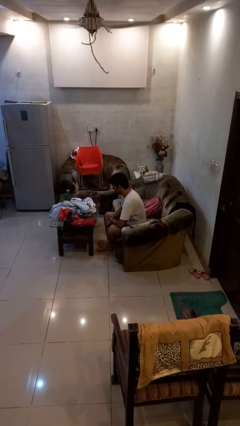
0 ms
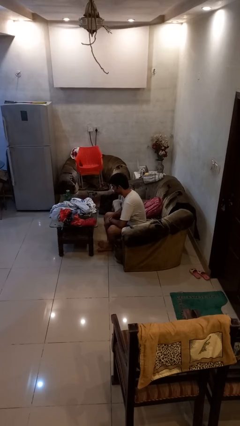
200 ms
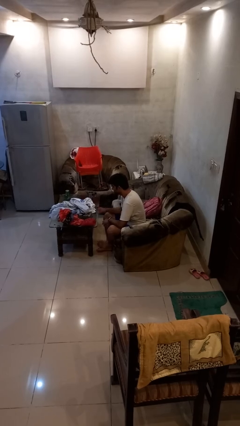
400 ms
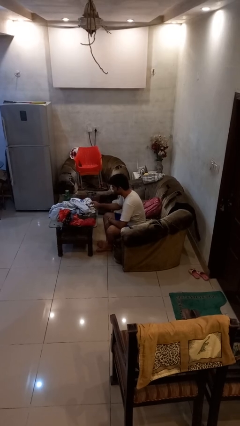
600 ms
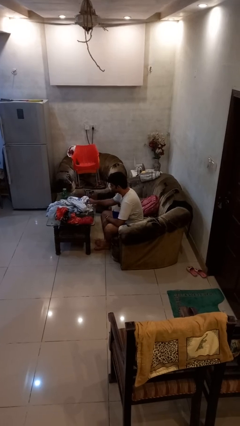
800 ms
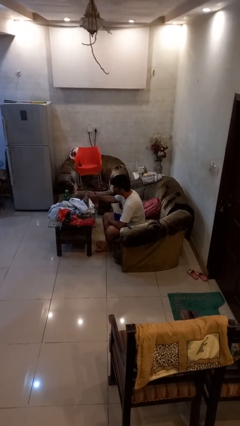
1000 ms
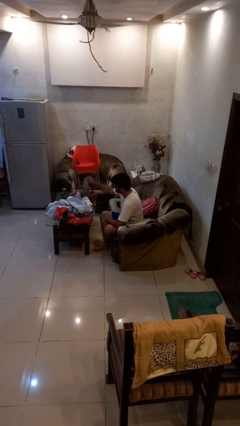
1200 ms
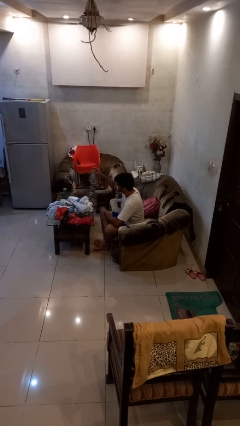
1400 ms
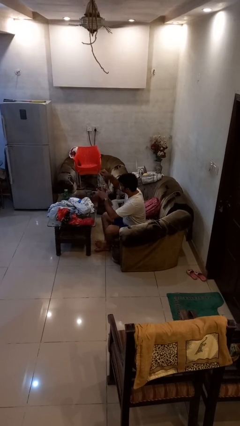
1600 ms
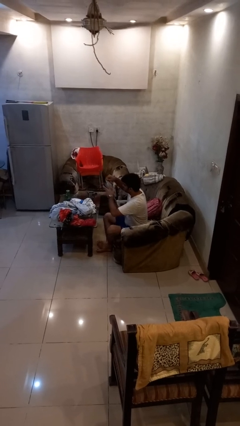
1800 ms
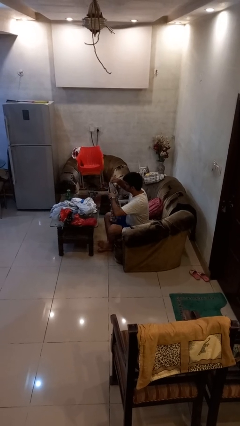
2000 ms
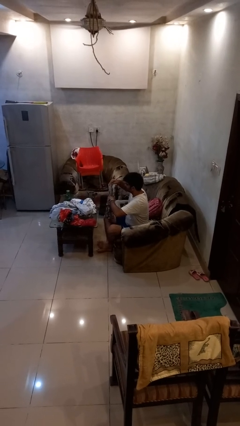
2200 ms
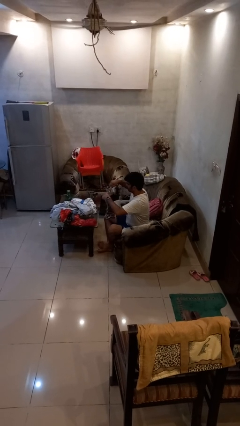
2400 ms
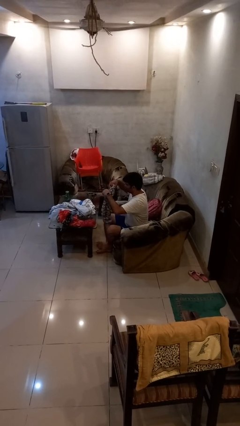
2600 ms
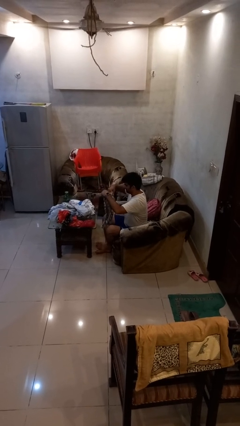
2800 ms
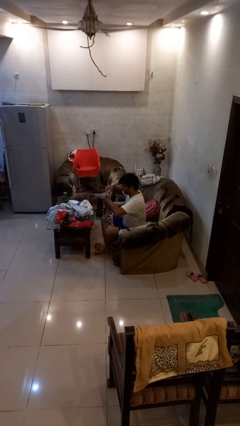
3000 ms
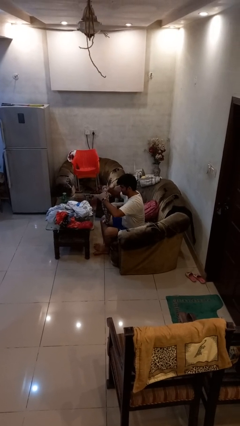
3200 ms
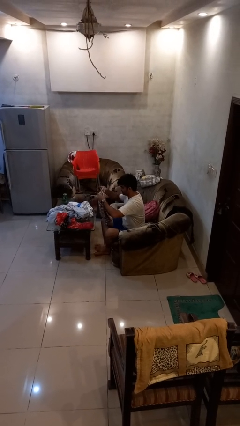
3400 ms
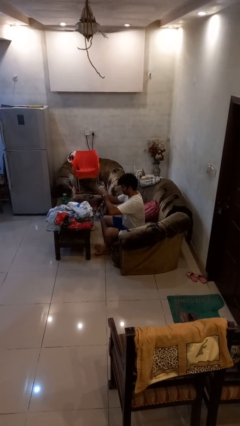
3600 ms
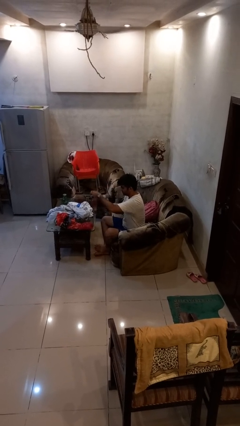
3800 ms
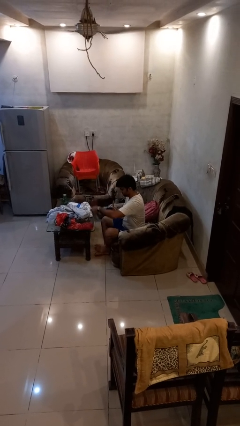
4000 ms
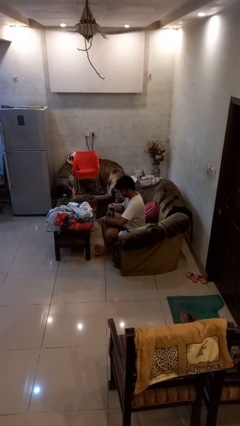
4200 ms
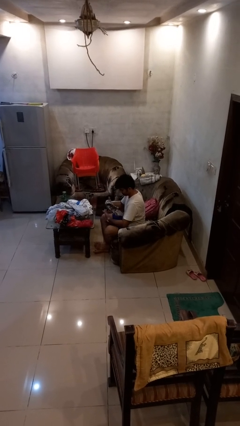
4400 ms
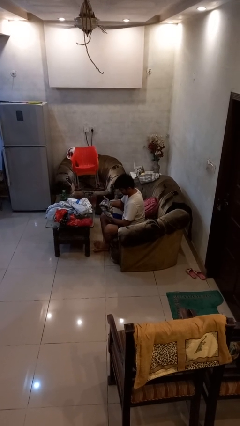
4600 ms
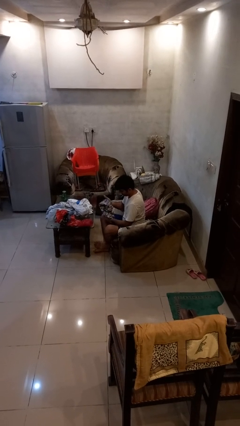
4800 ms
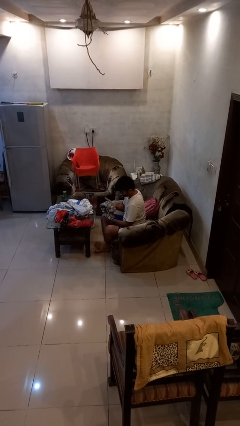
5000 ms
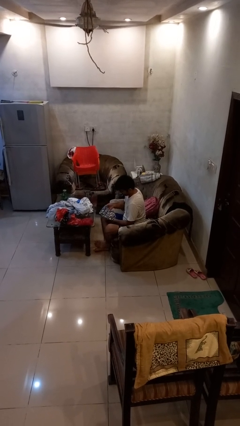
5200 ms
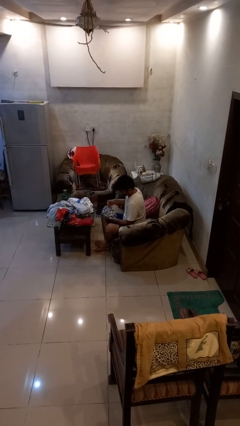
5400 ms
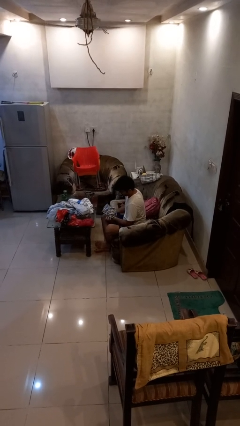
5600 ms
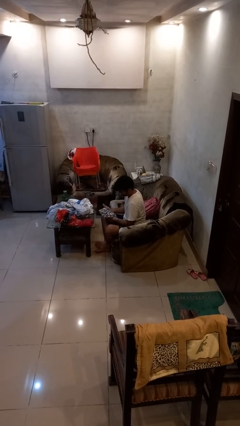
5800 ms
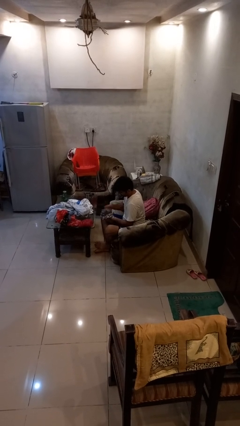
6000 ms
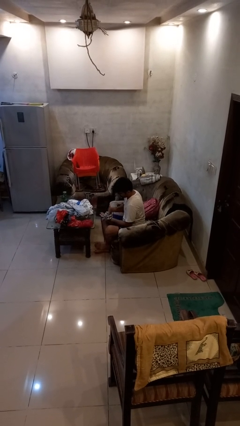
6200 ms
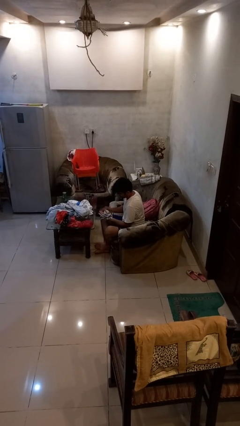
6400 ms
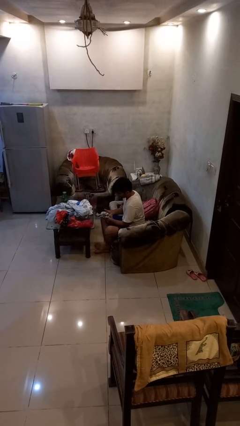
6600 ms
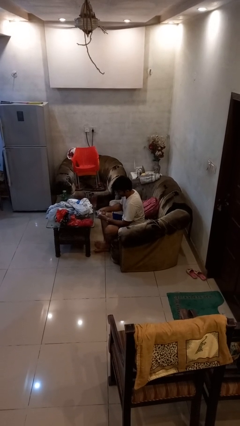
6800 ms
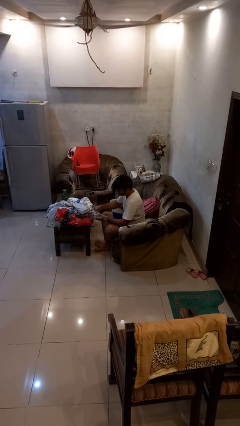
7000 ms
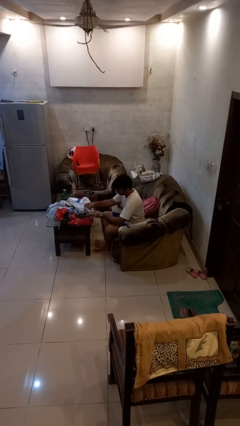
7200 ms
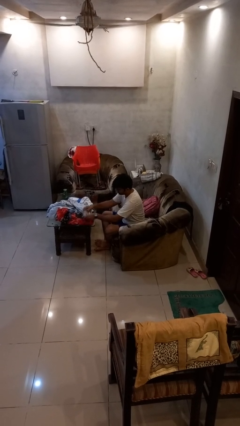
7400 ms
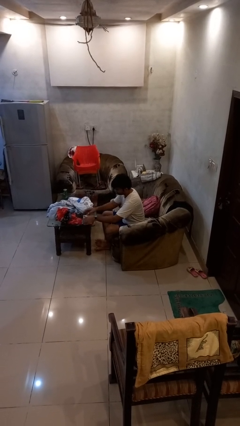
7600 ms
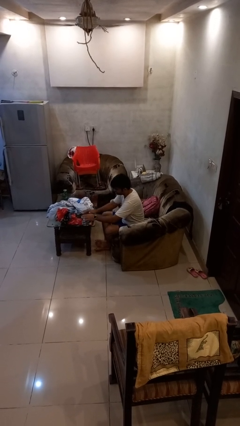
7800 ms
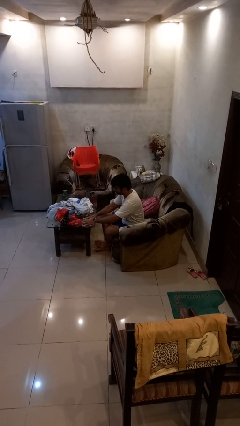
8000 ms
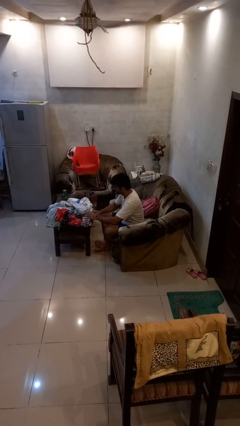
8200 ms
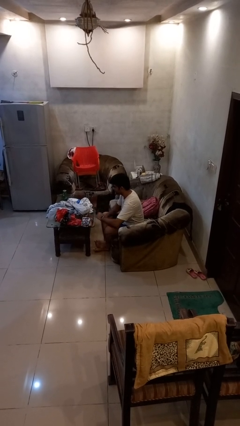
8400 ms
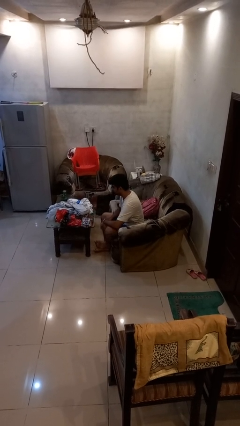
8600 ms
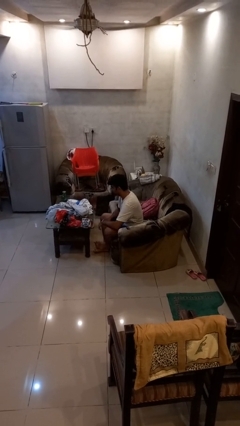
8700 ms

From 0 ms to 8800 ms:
person folds pants

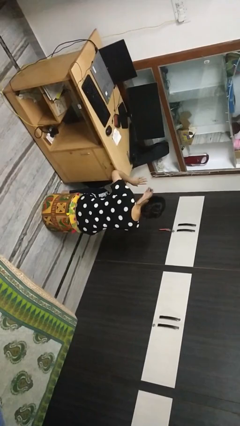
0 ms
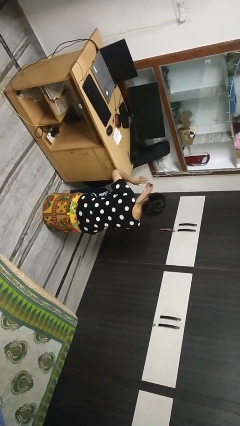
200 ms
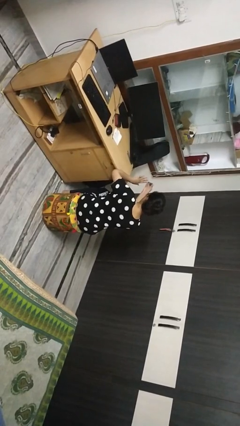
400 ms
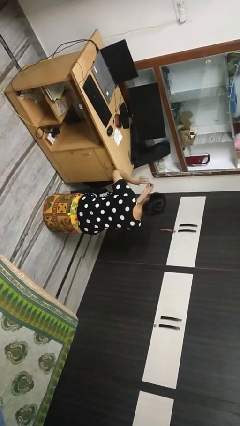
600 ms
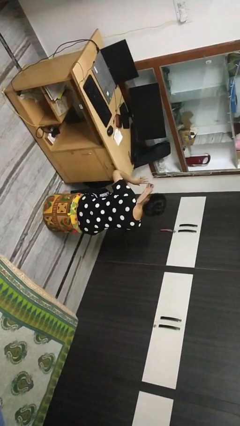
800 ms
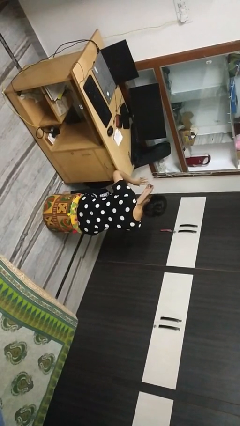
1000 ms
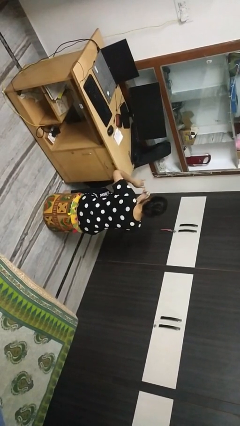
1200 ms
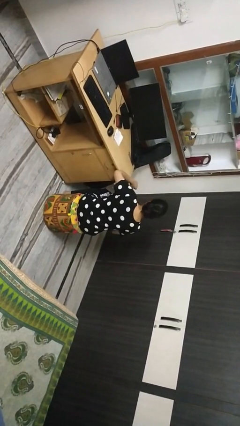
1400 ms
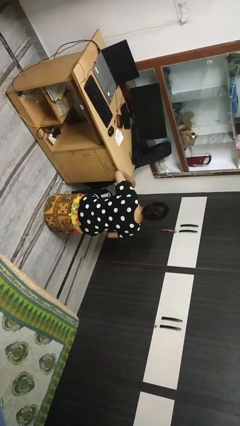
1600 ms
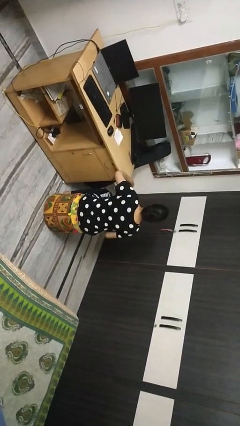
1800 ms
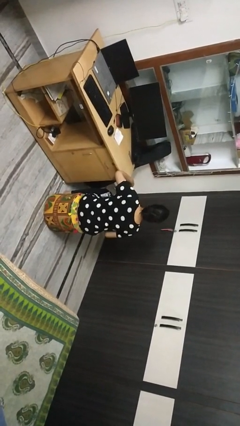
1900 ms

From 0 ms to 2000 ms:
person clips fingernails

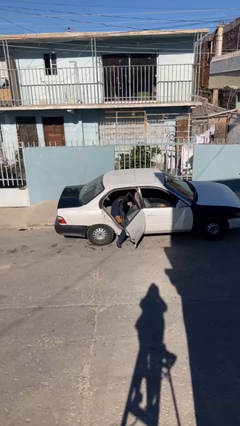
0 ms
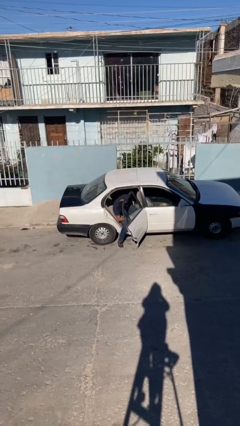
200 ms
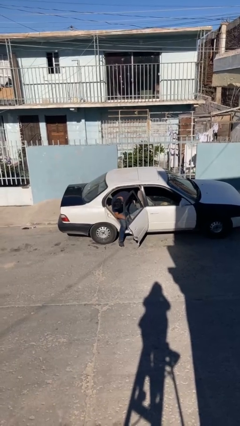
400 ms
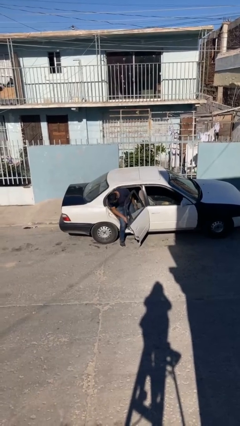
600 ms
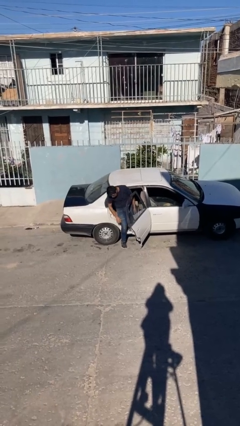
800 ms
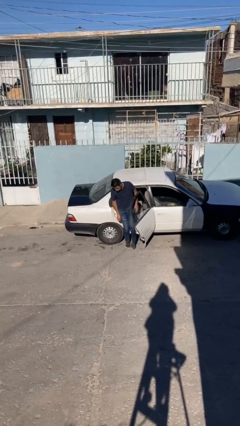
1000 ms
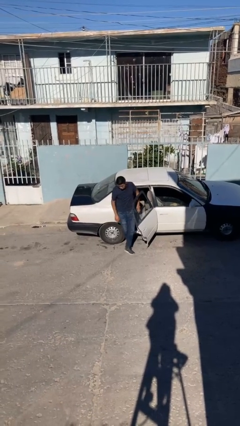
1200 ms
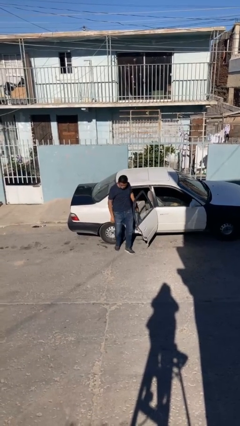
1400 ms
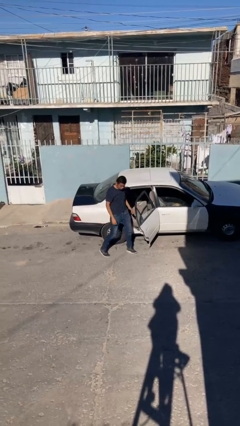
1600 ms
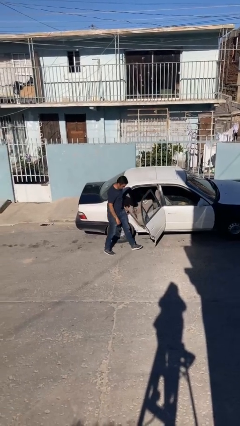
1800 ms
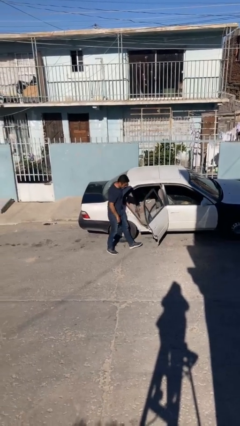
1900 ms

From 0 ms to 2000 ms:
person exits car

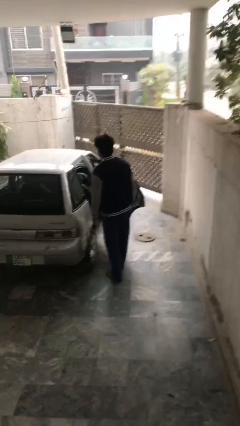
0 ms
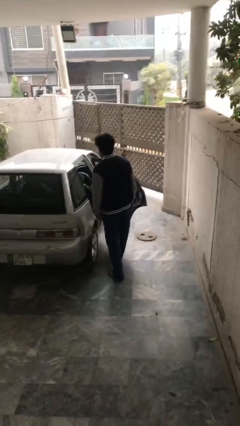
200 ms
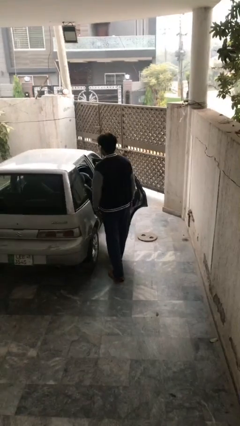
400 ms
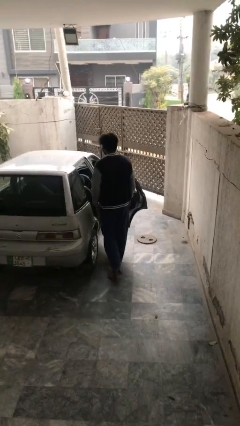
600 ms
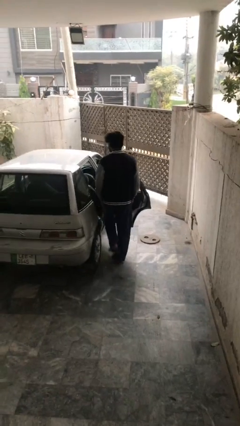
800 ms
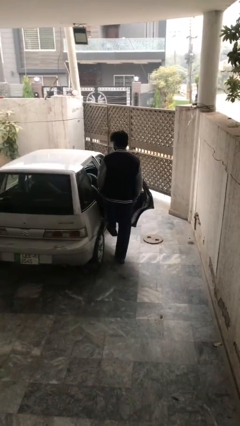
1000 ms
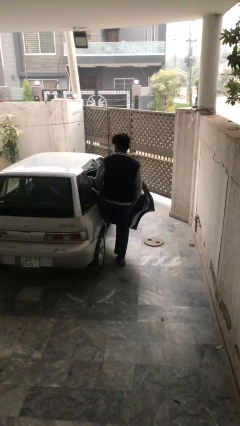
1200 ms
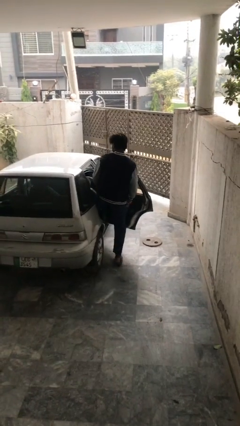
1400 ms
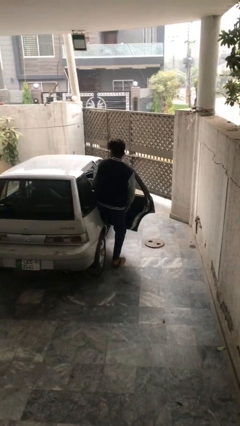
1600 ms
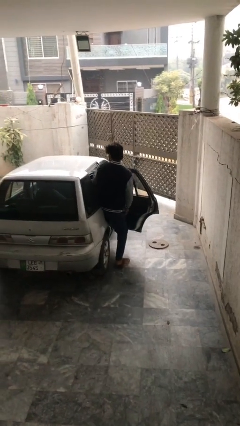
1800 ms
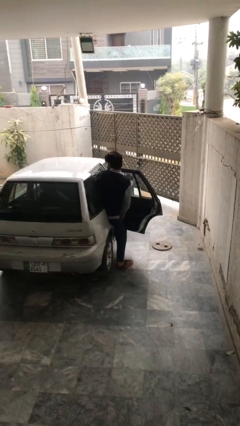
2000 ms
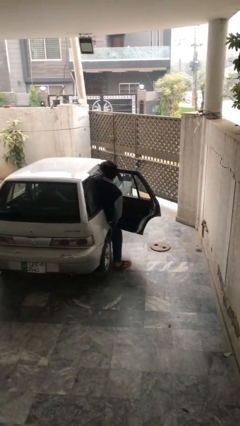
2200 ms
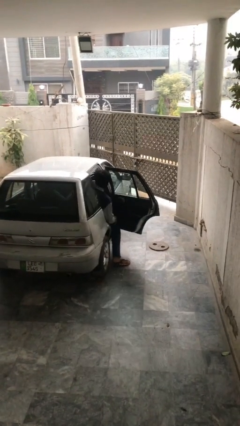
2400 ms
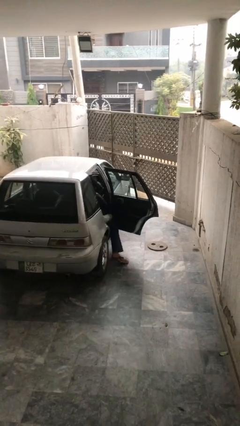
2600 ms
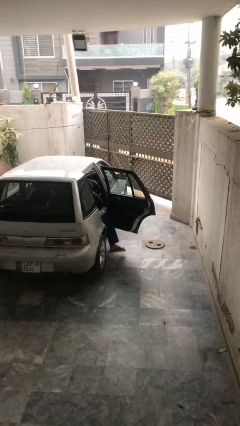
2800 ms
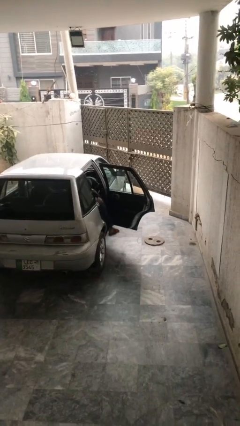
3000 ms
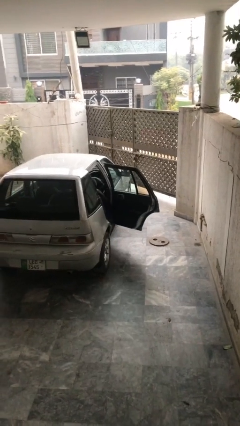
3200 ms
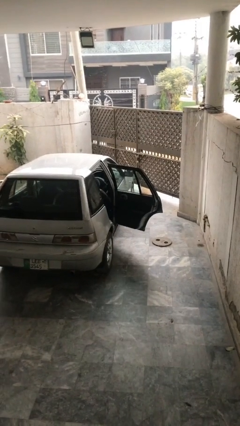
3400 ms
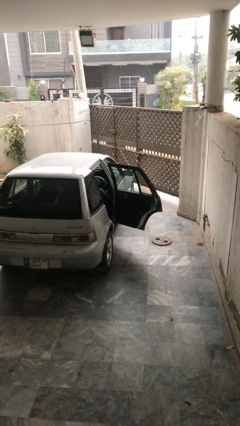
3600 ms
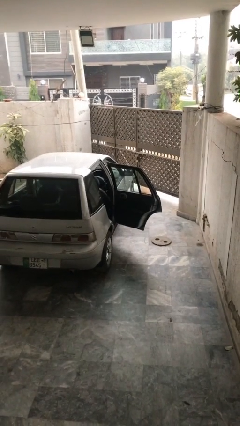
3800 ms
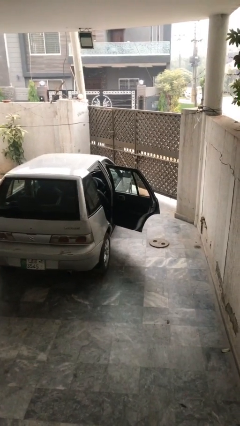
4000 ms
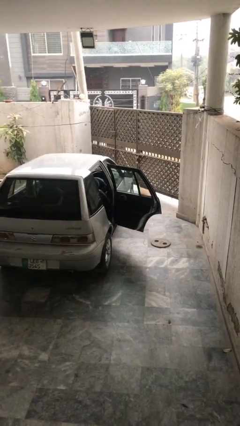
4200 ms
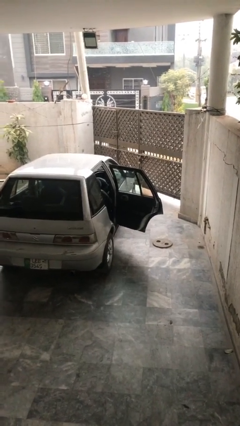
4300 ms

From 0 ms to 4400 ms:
person enters car

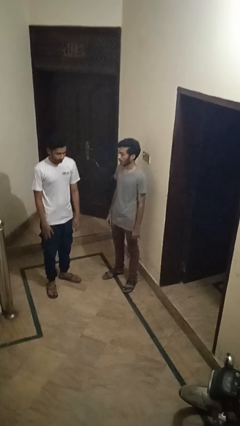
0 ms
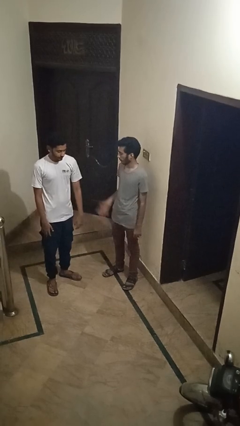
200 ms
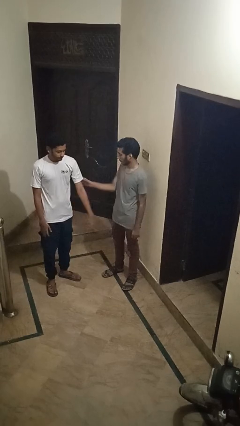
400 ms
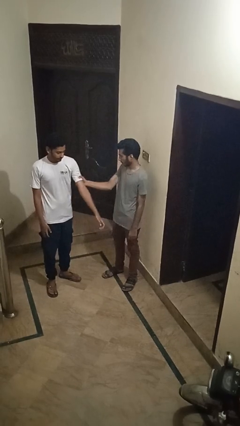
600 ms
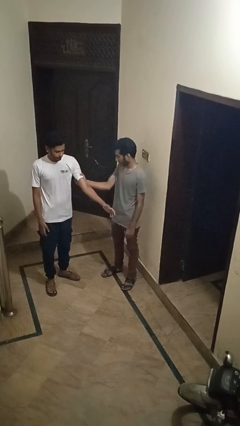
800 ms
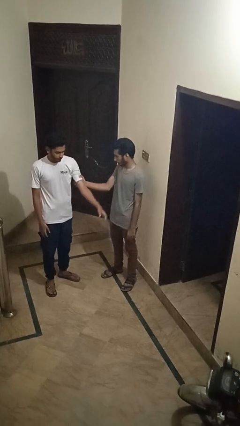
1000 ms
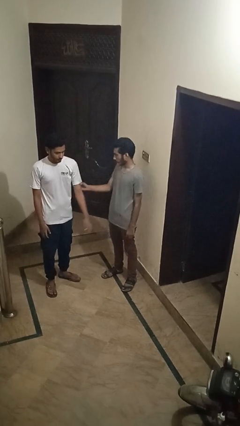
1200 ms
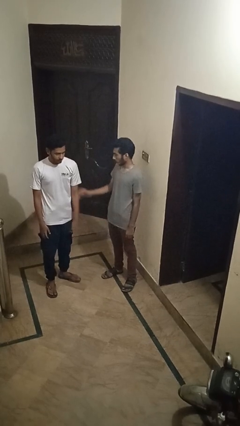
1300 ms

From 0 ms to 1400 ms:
person grabs person by bicep
